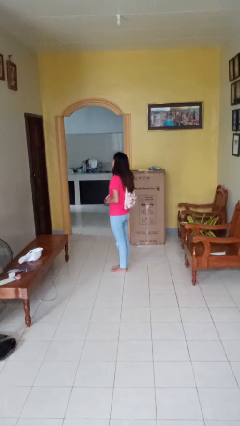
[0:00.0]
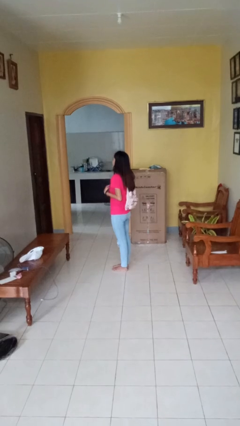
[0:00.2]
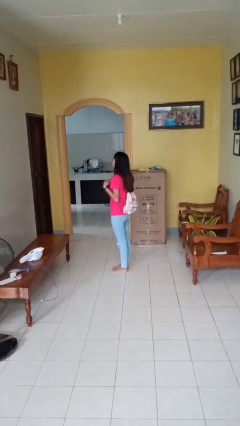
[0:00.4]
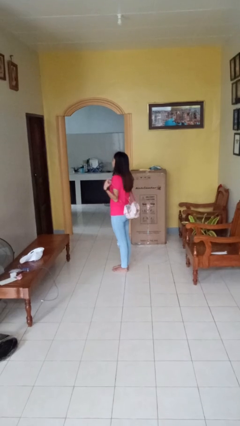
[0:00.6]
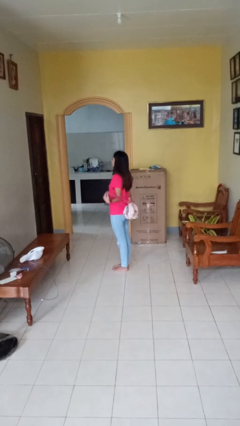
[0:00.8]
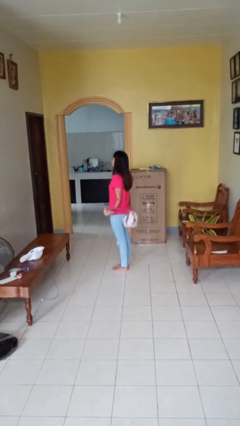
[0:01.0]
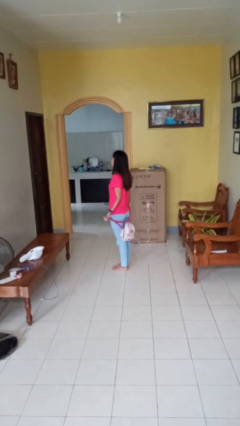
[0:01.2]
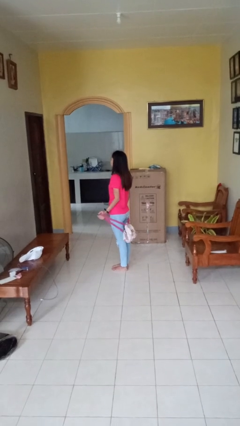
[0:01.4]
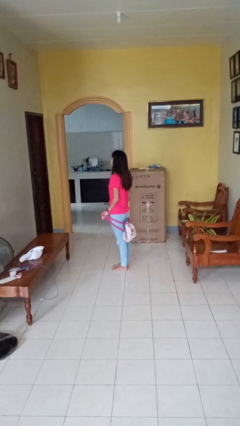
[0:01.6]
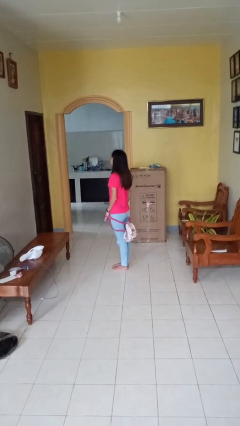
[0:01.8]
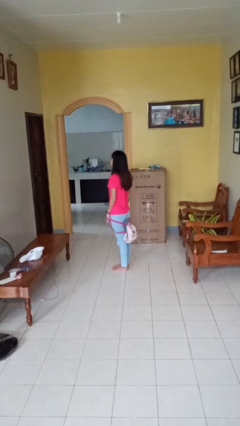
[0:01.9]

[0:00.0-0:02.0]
person takes off backpack

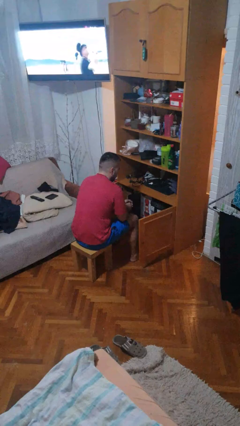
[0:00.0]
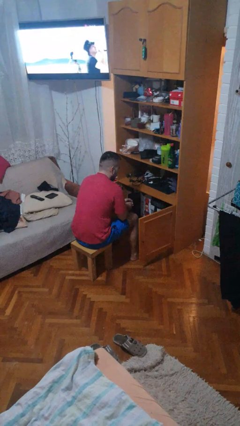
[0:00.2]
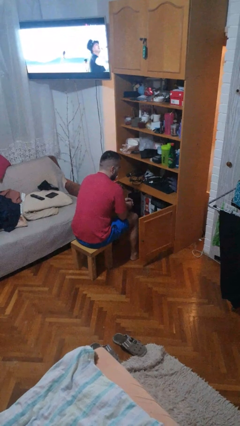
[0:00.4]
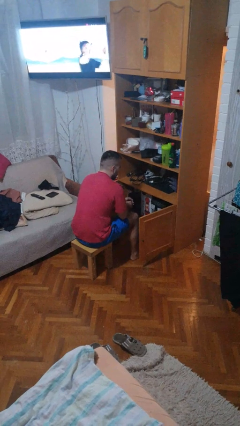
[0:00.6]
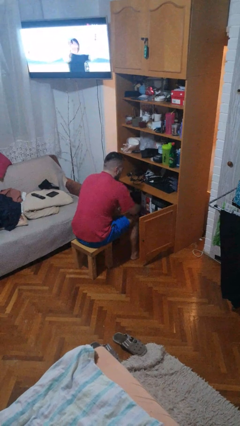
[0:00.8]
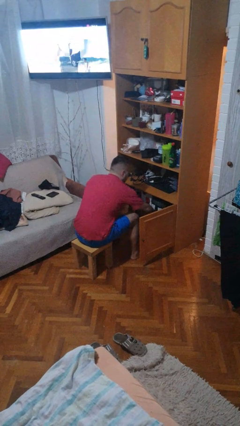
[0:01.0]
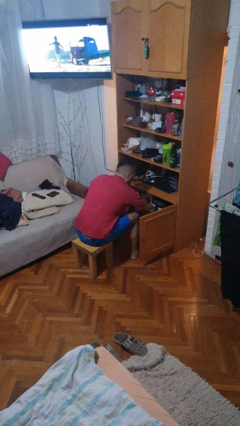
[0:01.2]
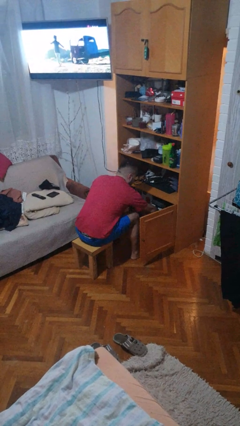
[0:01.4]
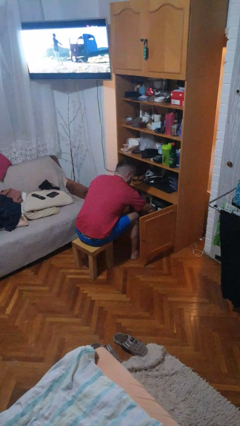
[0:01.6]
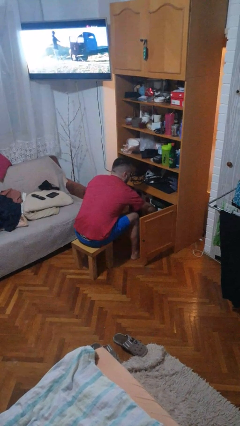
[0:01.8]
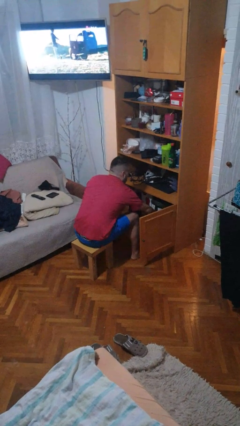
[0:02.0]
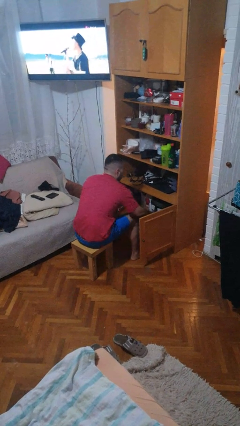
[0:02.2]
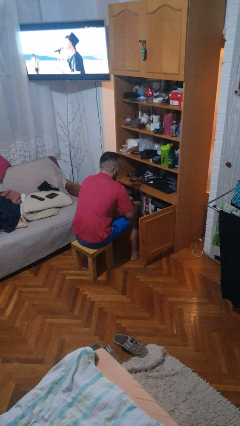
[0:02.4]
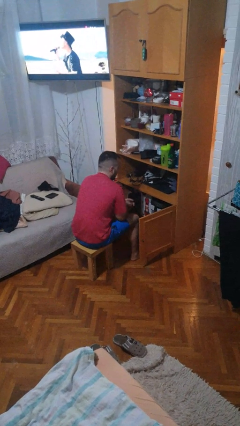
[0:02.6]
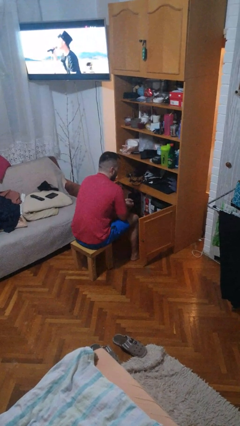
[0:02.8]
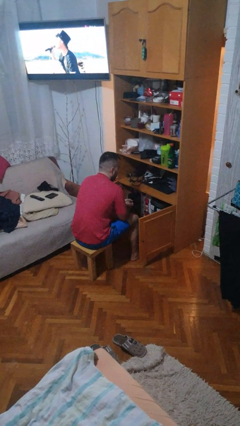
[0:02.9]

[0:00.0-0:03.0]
person searches in cabinet

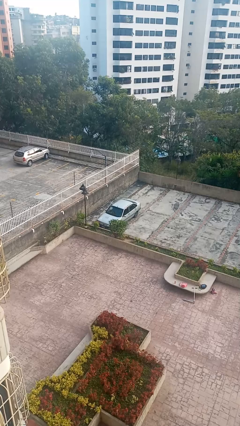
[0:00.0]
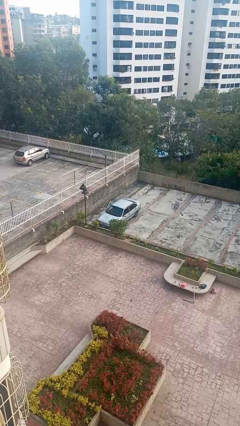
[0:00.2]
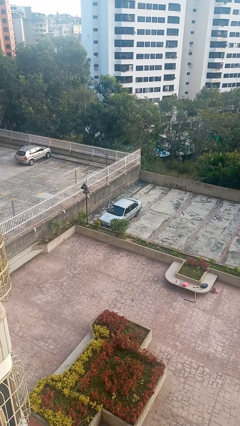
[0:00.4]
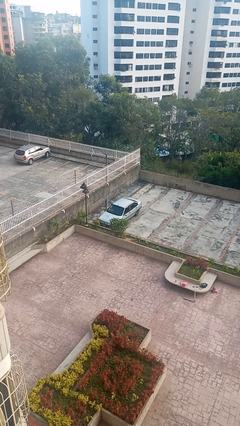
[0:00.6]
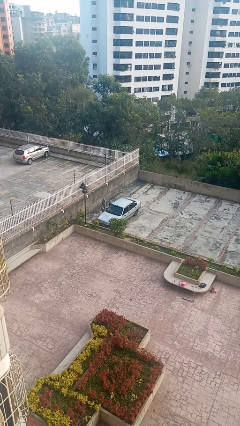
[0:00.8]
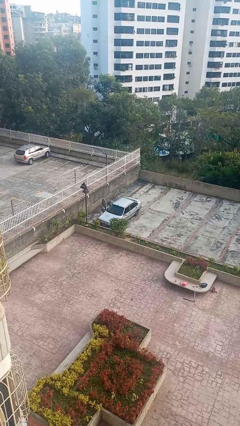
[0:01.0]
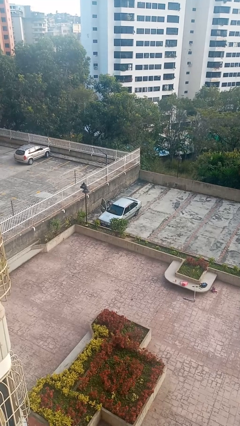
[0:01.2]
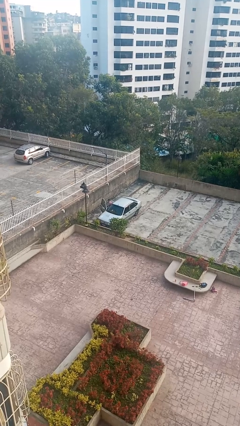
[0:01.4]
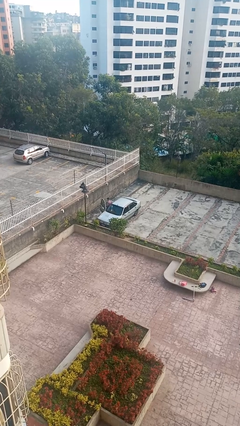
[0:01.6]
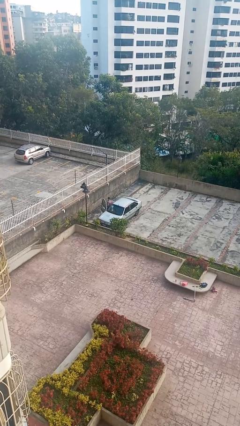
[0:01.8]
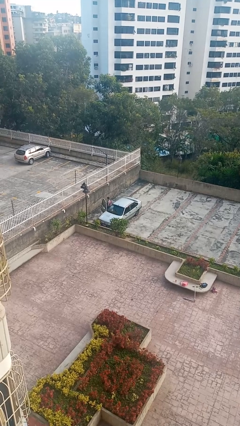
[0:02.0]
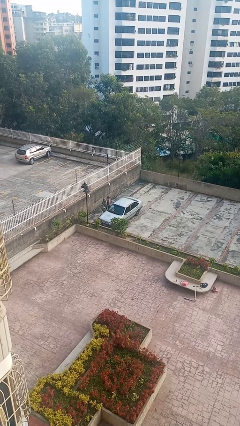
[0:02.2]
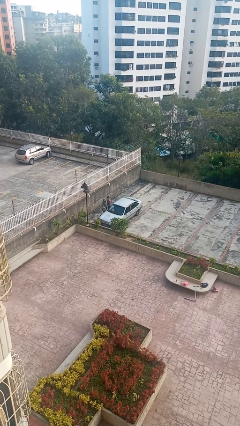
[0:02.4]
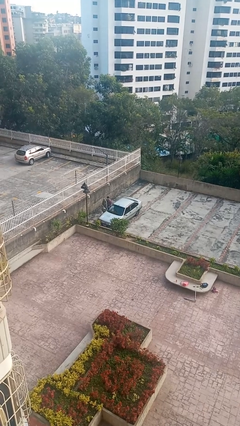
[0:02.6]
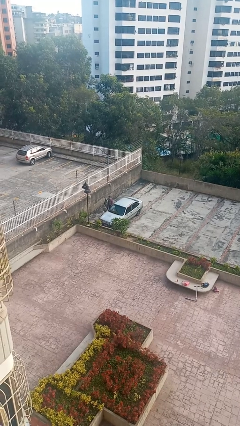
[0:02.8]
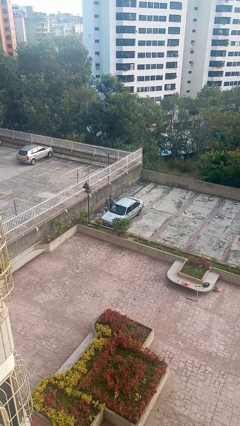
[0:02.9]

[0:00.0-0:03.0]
car drops off person

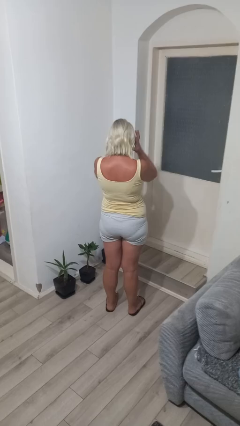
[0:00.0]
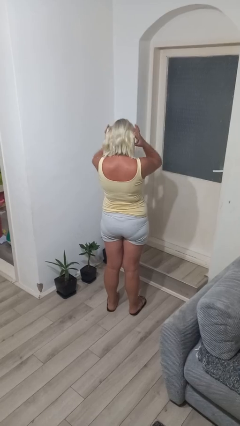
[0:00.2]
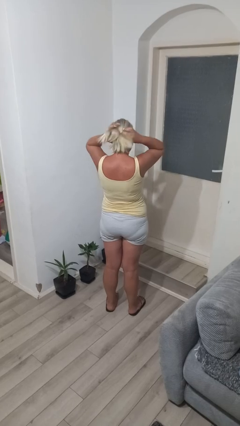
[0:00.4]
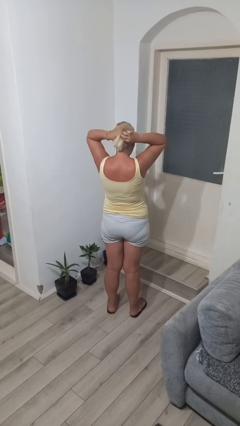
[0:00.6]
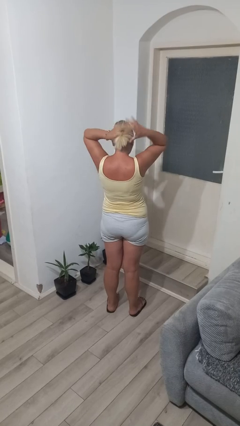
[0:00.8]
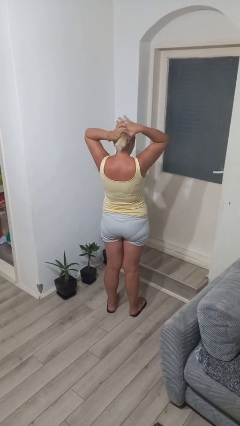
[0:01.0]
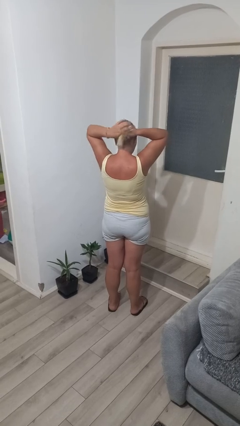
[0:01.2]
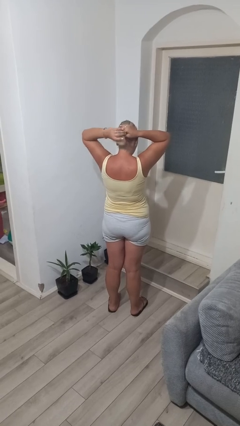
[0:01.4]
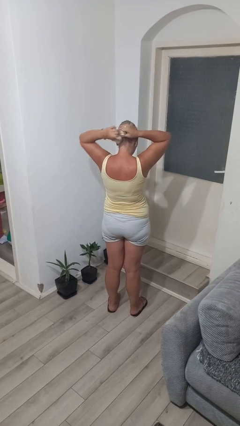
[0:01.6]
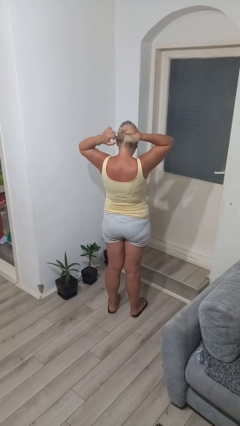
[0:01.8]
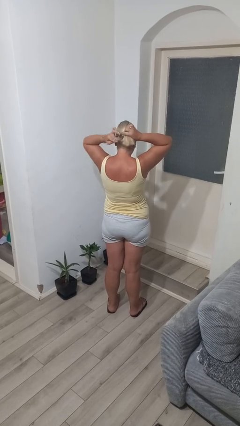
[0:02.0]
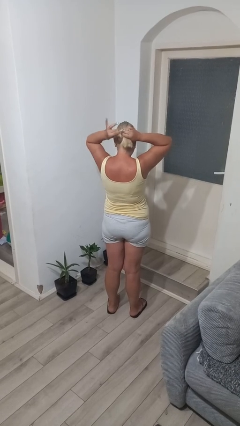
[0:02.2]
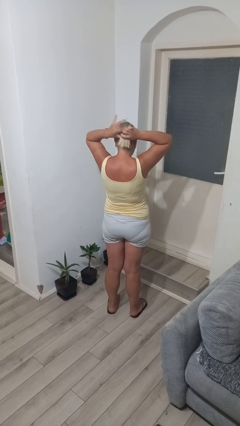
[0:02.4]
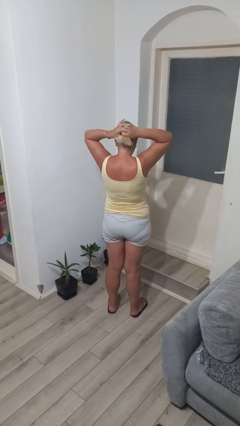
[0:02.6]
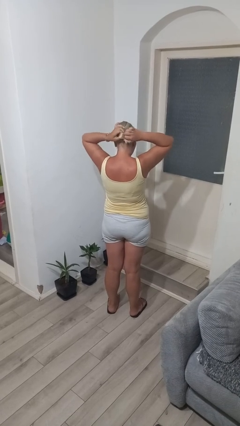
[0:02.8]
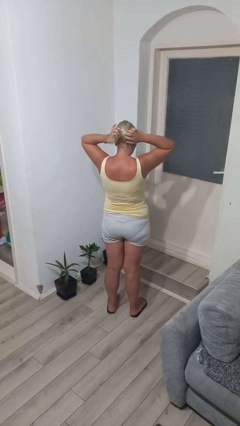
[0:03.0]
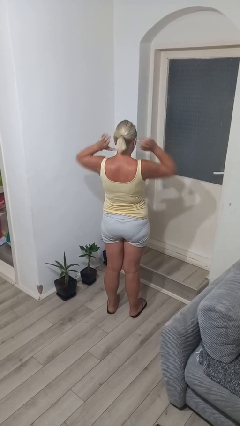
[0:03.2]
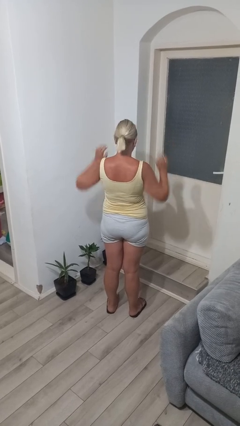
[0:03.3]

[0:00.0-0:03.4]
person puts hair in ponytail

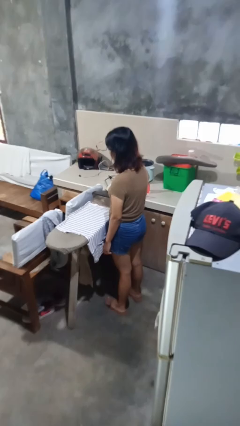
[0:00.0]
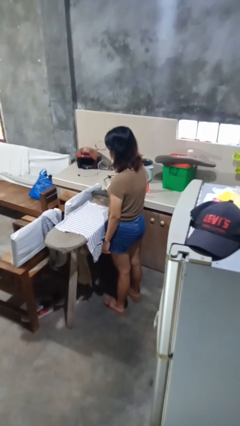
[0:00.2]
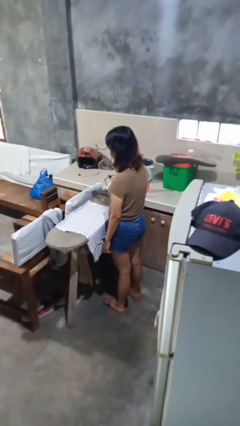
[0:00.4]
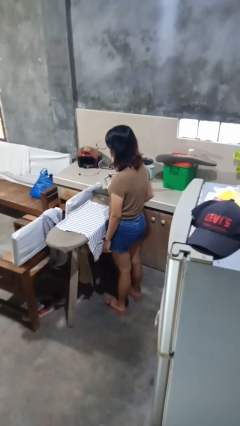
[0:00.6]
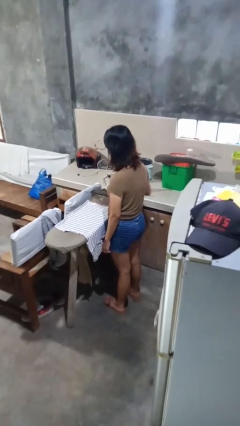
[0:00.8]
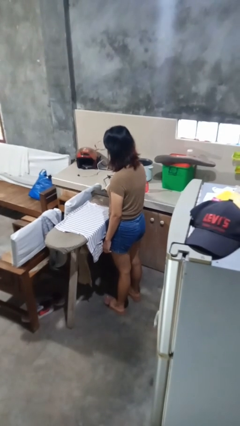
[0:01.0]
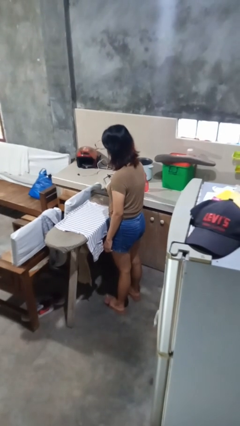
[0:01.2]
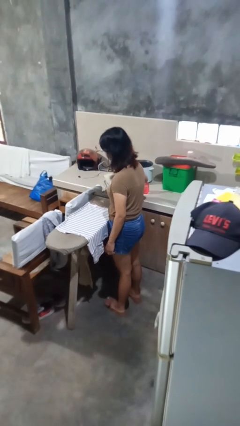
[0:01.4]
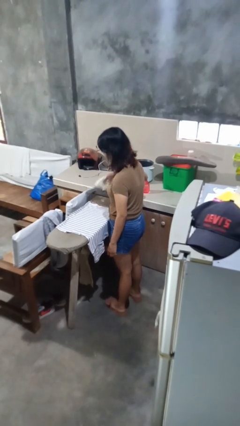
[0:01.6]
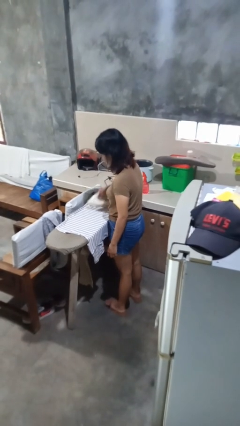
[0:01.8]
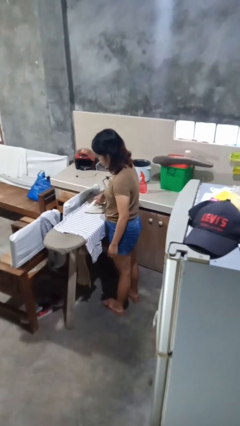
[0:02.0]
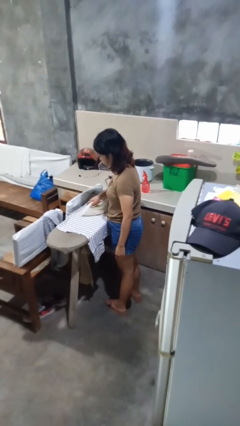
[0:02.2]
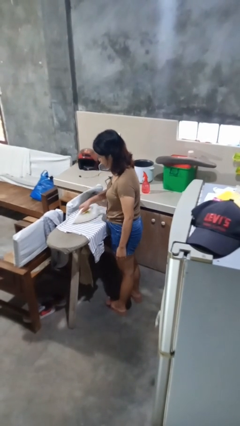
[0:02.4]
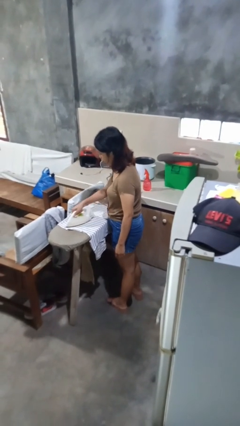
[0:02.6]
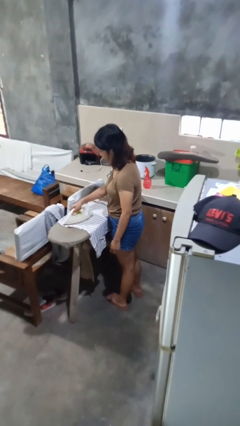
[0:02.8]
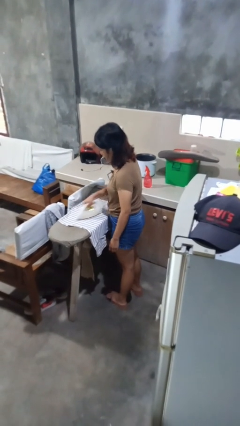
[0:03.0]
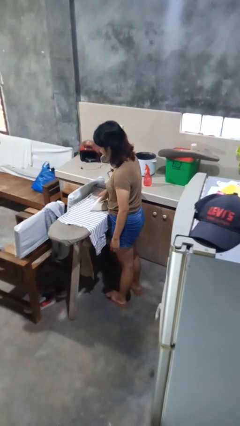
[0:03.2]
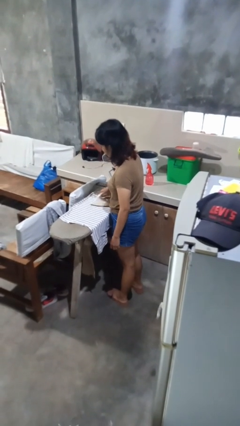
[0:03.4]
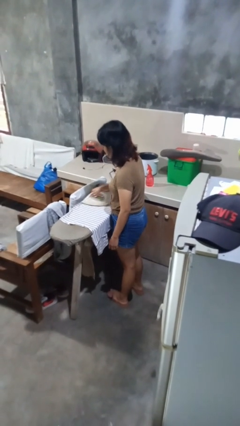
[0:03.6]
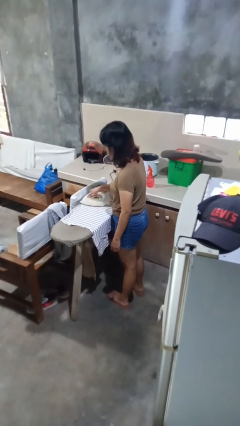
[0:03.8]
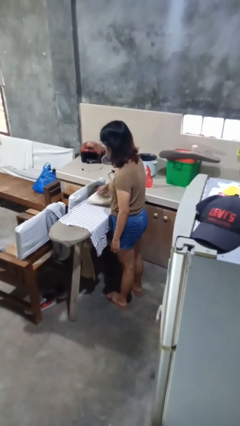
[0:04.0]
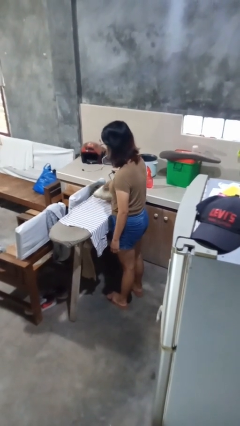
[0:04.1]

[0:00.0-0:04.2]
person irons clothes

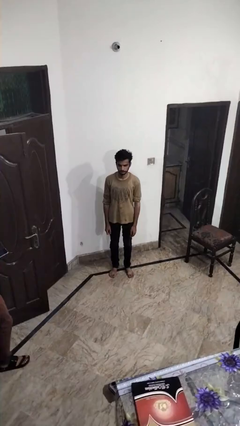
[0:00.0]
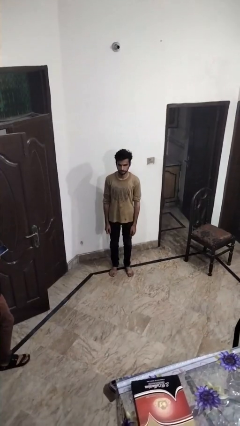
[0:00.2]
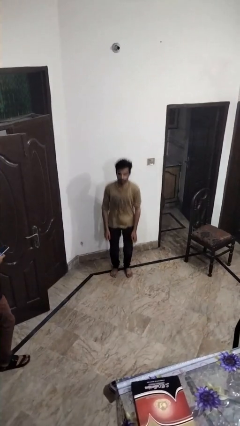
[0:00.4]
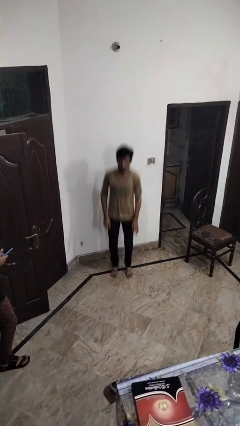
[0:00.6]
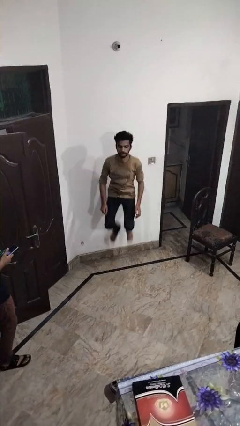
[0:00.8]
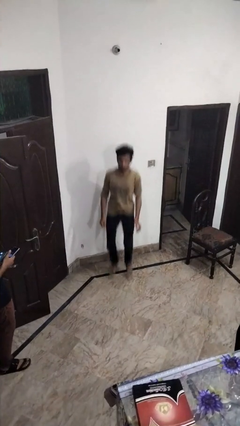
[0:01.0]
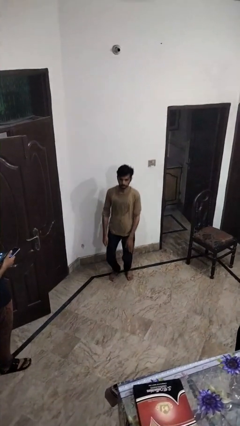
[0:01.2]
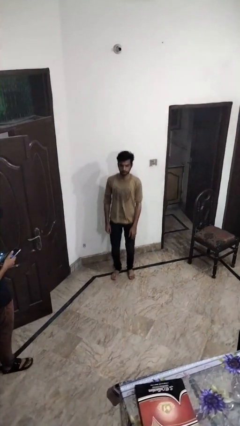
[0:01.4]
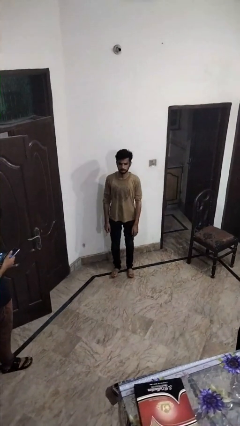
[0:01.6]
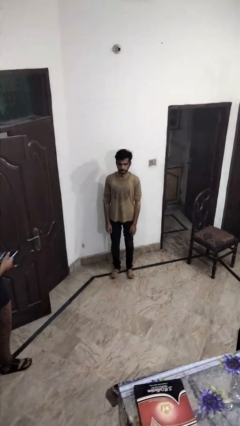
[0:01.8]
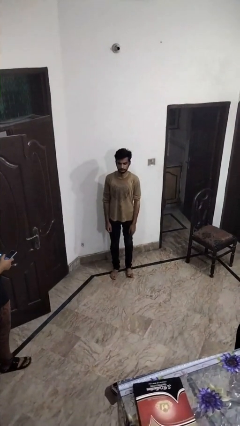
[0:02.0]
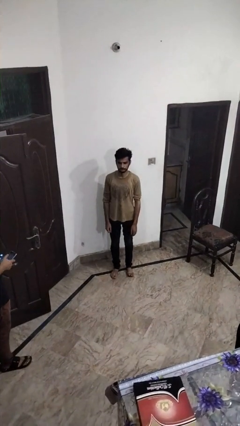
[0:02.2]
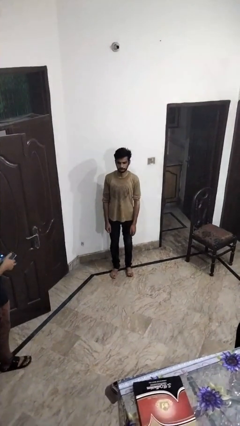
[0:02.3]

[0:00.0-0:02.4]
person jumps
